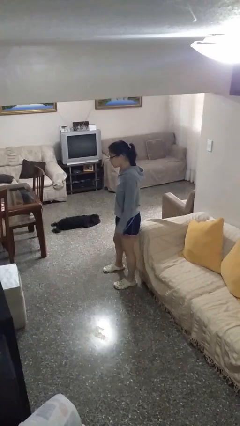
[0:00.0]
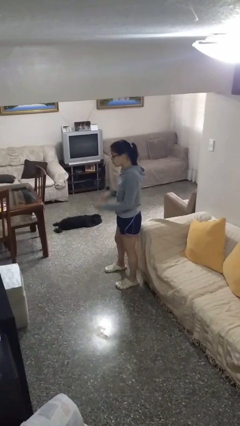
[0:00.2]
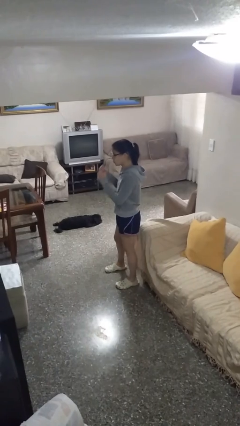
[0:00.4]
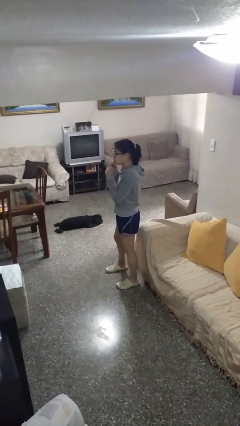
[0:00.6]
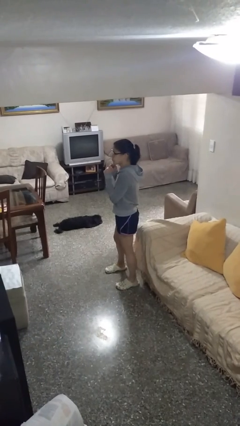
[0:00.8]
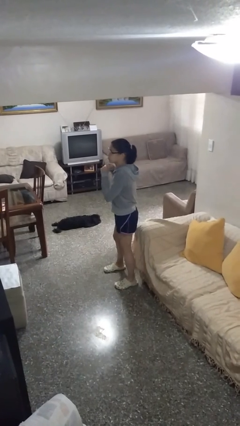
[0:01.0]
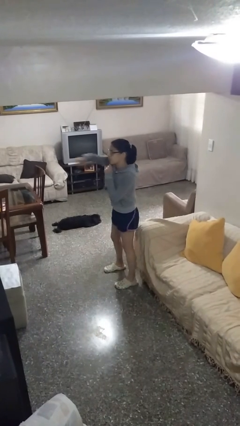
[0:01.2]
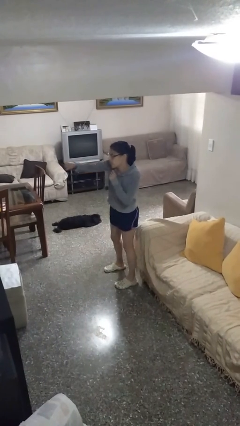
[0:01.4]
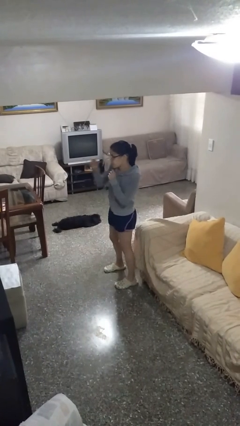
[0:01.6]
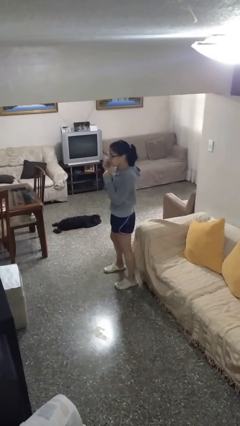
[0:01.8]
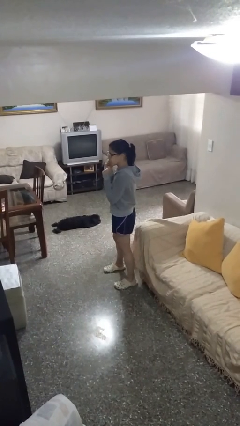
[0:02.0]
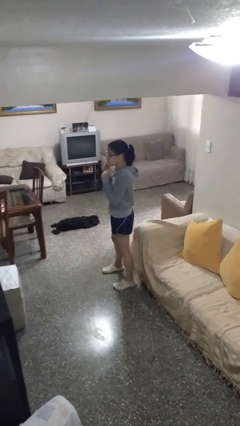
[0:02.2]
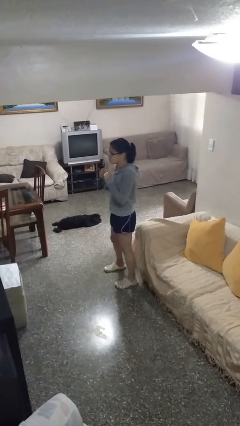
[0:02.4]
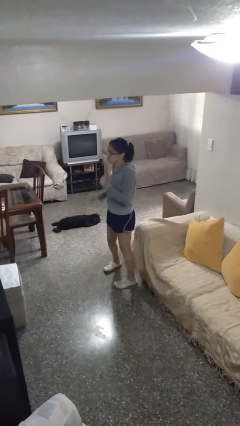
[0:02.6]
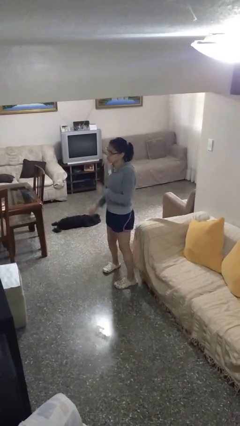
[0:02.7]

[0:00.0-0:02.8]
person punches

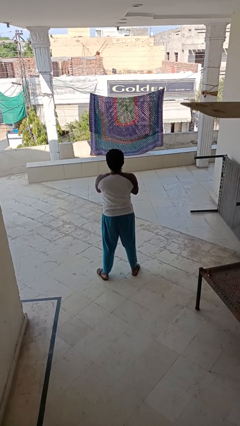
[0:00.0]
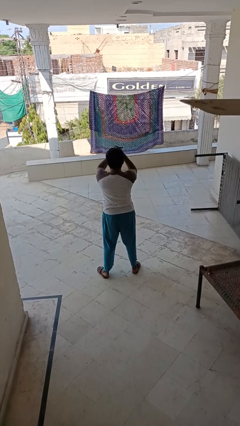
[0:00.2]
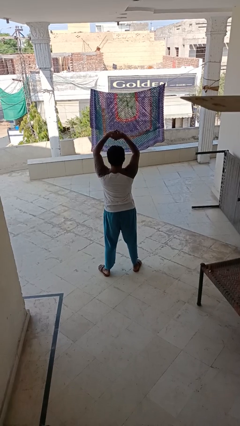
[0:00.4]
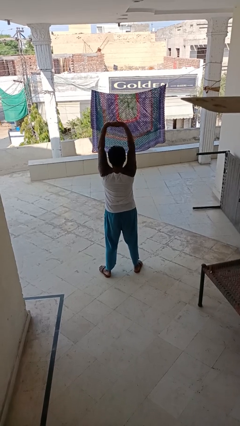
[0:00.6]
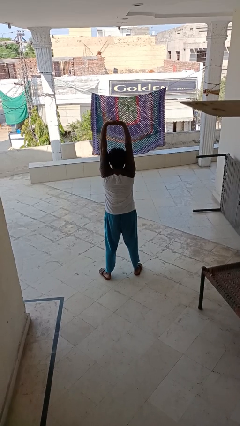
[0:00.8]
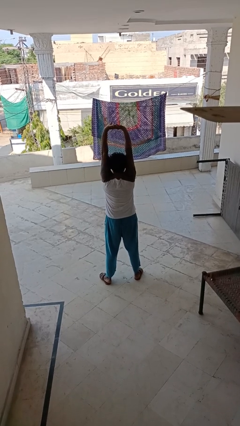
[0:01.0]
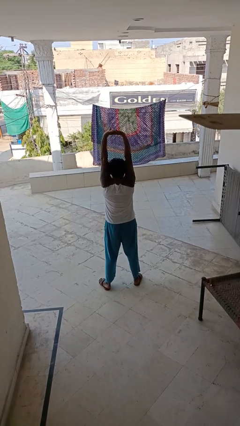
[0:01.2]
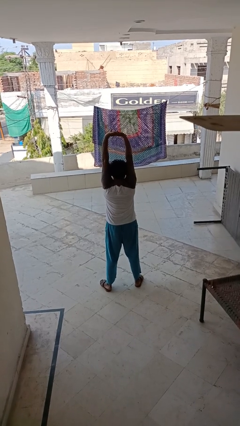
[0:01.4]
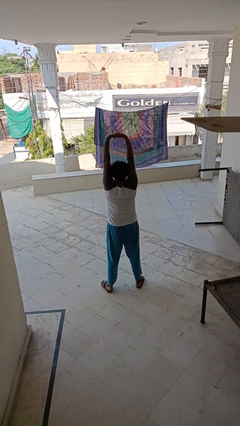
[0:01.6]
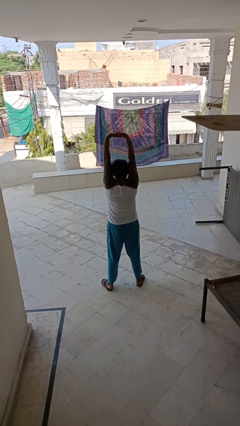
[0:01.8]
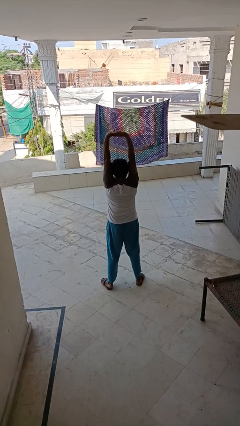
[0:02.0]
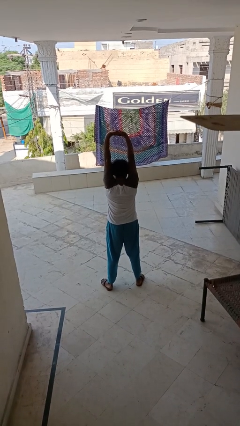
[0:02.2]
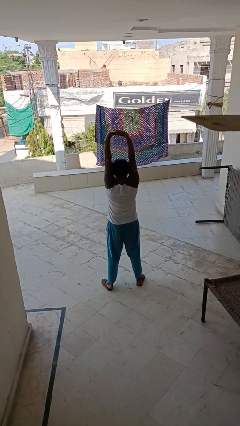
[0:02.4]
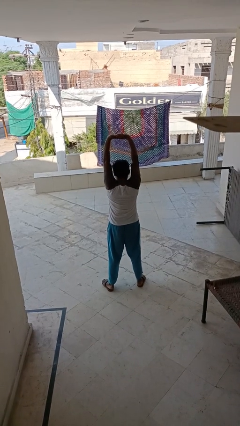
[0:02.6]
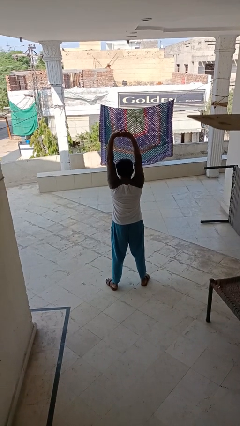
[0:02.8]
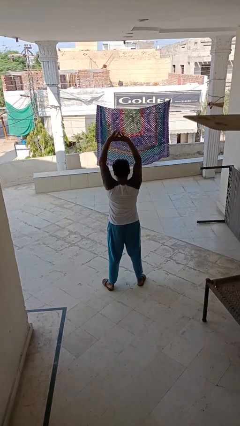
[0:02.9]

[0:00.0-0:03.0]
person stretches arms over head

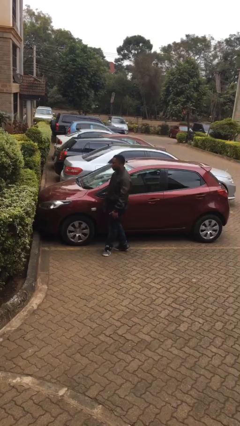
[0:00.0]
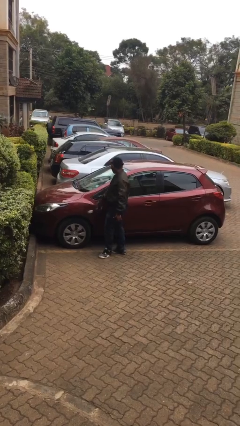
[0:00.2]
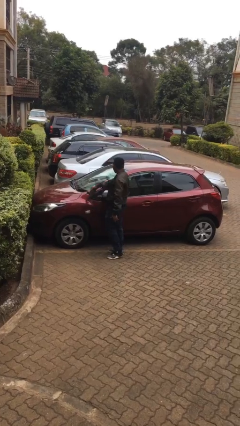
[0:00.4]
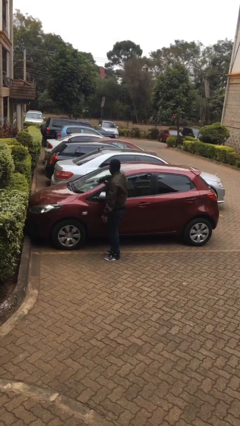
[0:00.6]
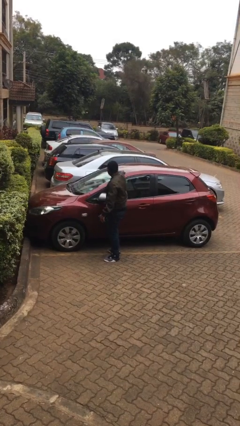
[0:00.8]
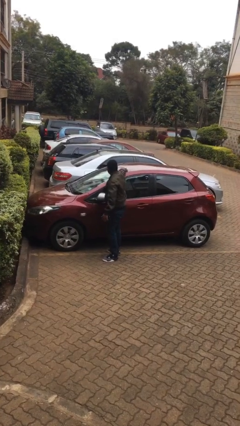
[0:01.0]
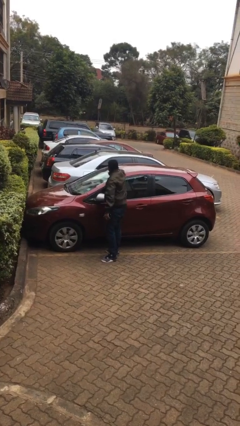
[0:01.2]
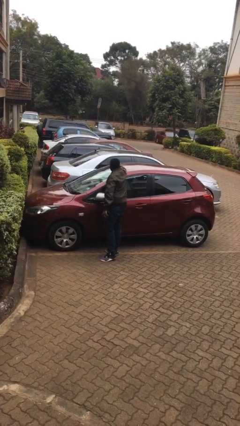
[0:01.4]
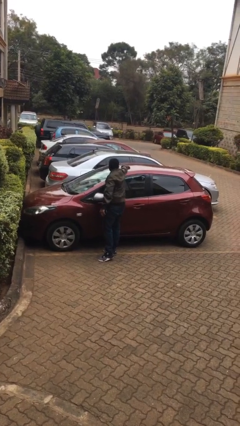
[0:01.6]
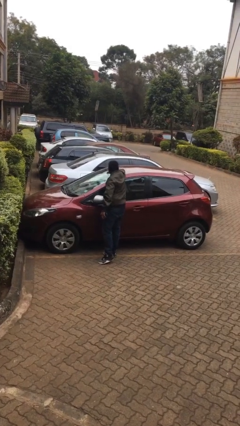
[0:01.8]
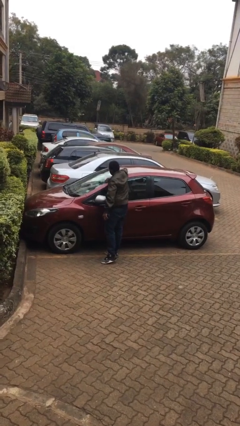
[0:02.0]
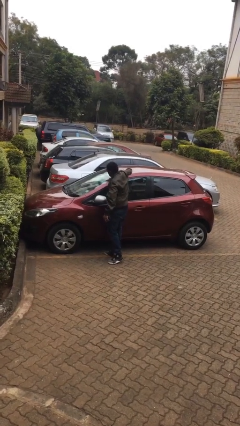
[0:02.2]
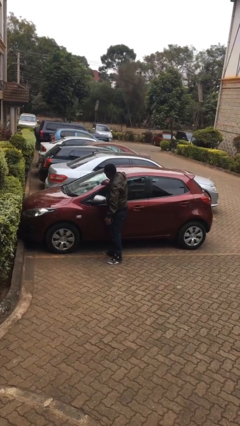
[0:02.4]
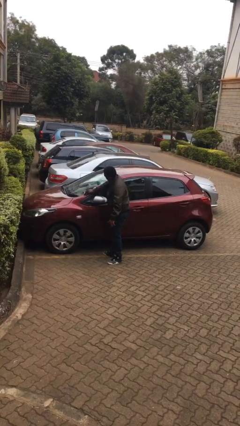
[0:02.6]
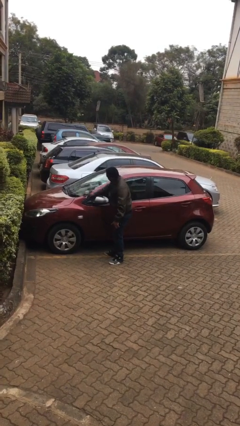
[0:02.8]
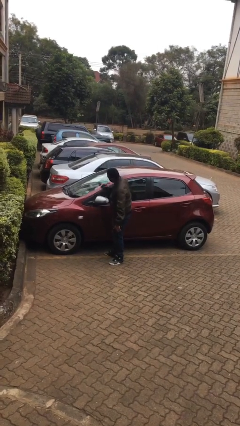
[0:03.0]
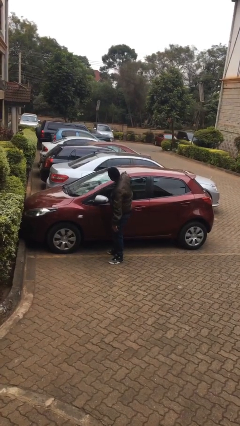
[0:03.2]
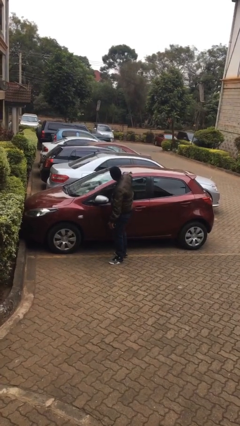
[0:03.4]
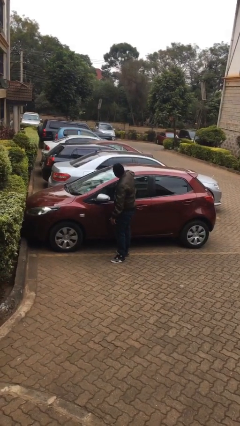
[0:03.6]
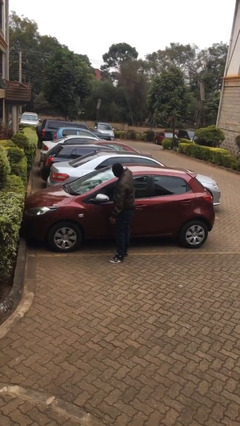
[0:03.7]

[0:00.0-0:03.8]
person polishes car with rag

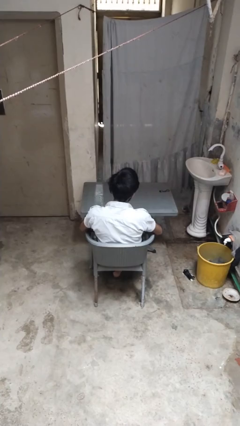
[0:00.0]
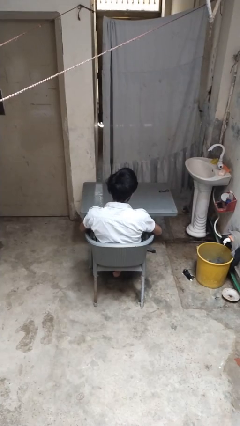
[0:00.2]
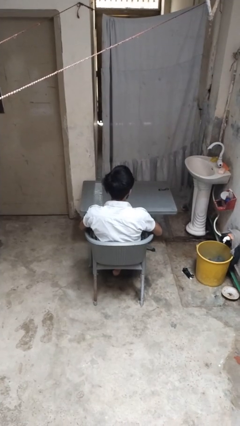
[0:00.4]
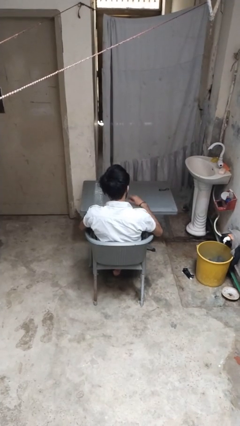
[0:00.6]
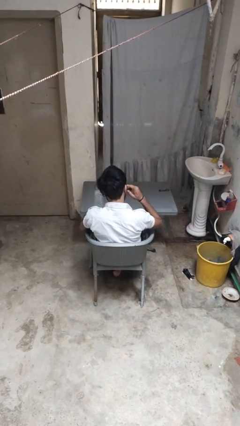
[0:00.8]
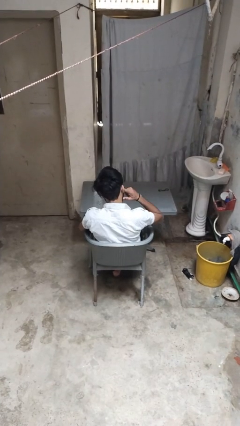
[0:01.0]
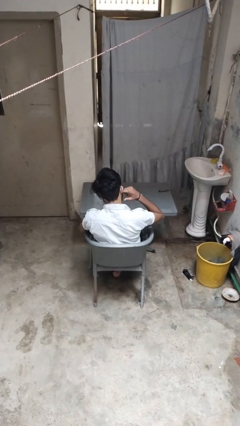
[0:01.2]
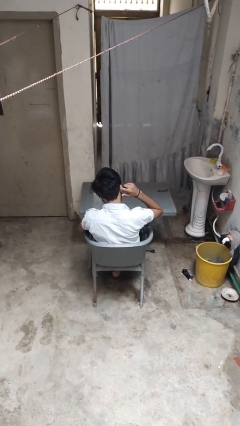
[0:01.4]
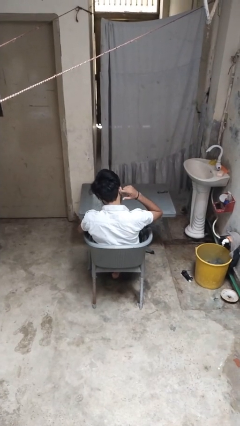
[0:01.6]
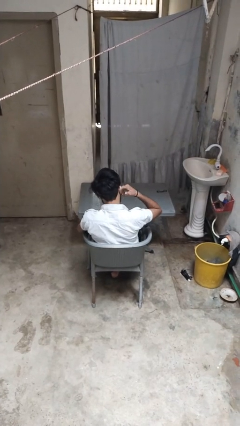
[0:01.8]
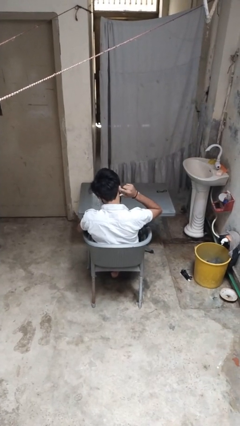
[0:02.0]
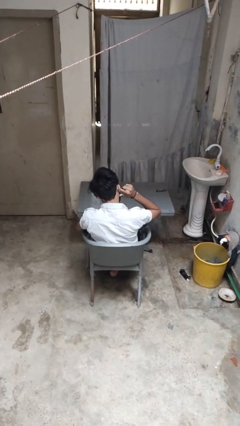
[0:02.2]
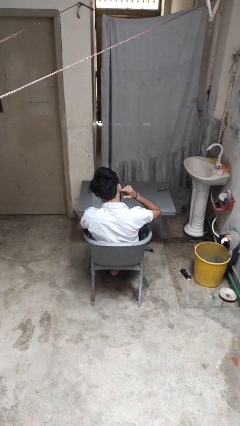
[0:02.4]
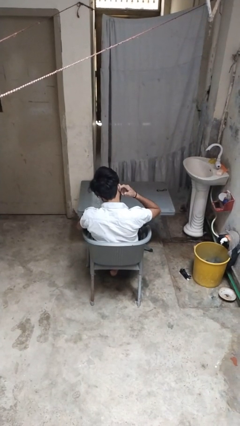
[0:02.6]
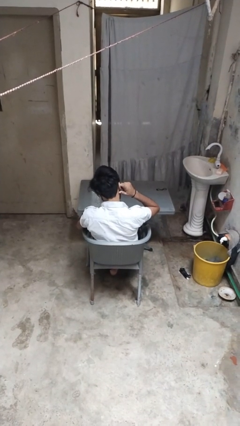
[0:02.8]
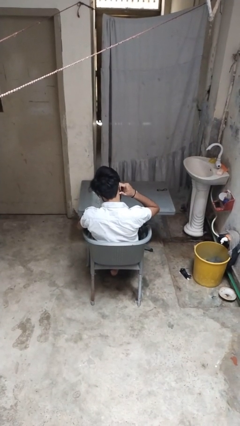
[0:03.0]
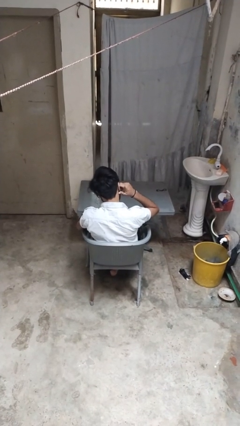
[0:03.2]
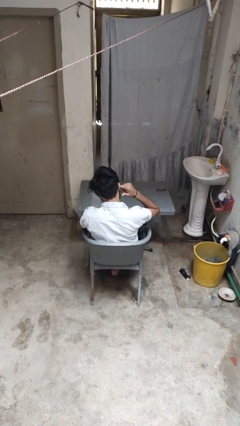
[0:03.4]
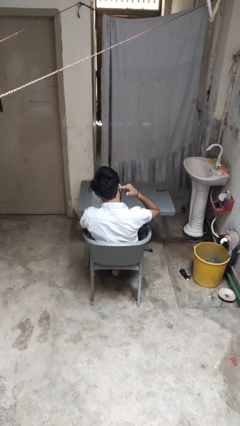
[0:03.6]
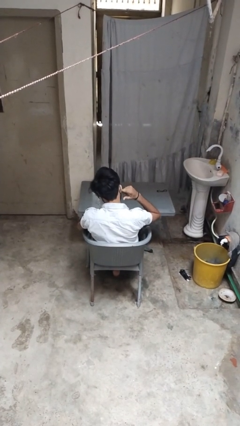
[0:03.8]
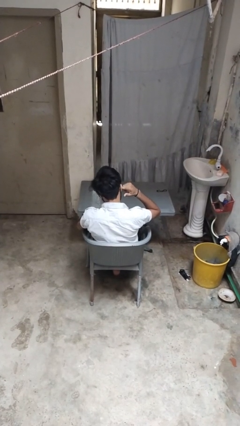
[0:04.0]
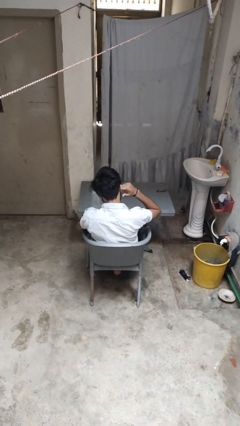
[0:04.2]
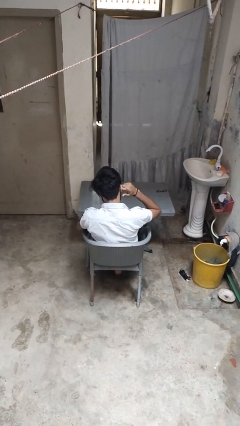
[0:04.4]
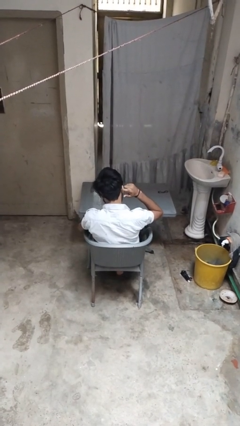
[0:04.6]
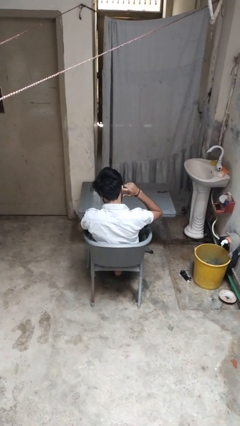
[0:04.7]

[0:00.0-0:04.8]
person puts fingers in ear

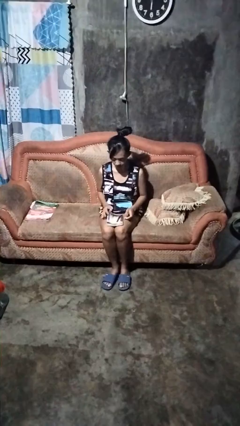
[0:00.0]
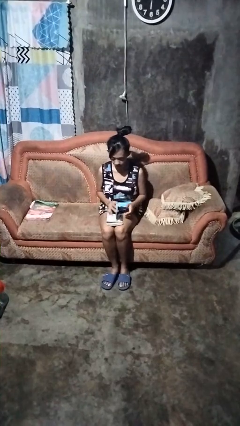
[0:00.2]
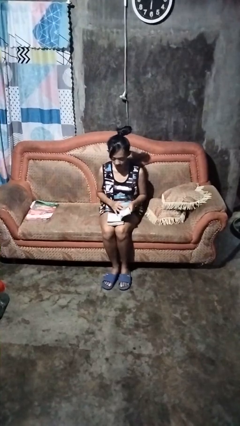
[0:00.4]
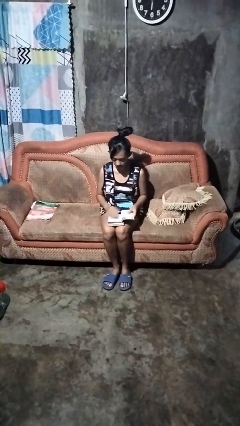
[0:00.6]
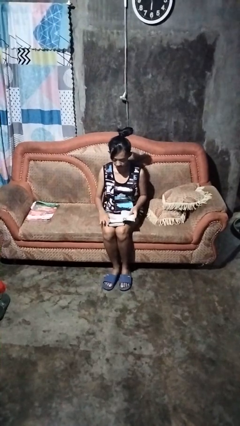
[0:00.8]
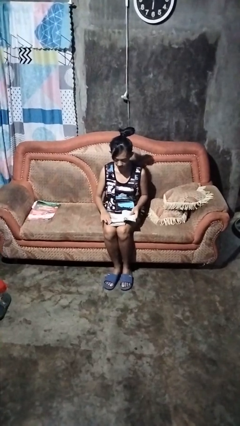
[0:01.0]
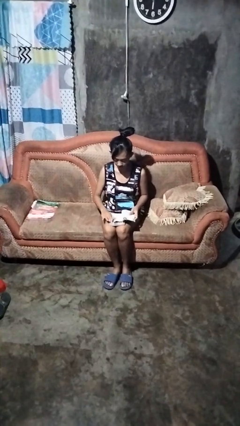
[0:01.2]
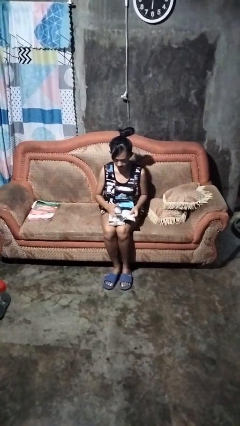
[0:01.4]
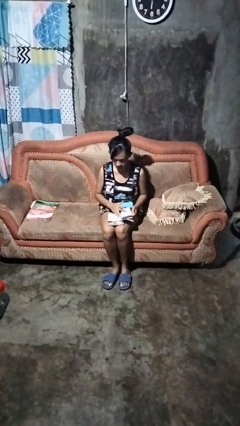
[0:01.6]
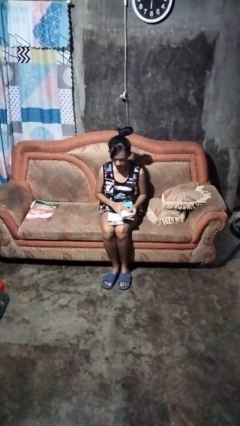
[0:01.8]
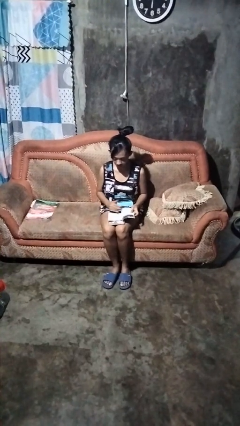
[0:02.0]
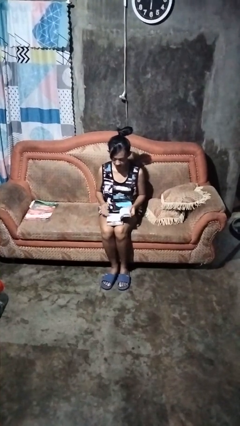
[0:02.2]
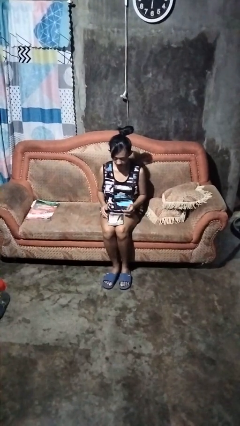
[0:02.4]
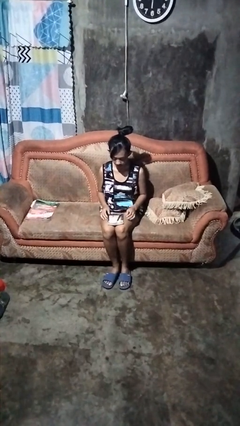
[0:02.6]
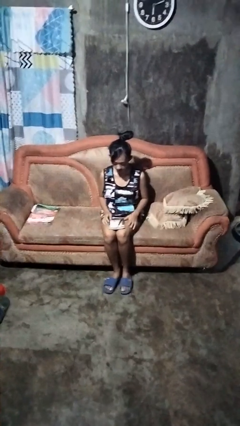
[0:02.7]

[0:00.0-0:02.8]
person reads book
